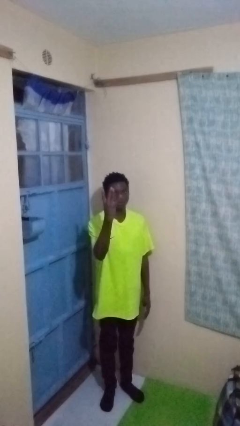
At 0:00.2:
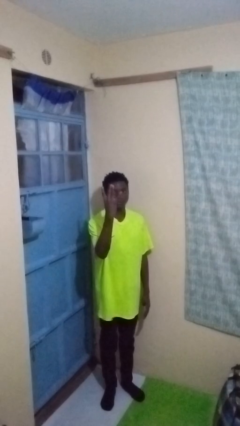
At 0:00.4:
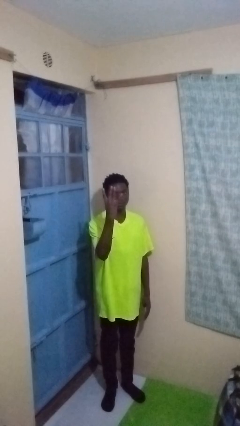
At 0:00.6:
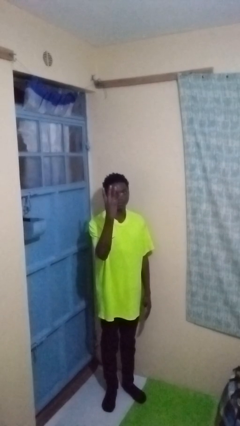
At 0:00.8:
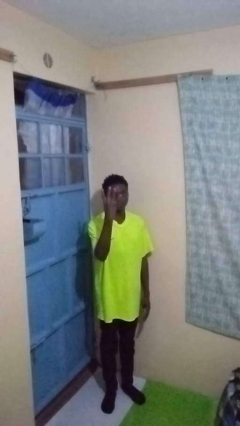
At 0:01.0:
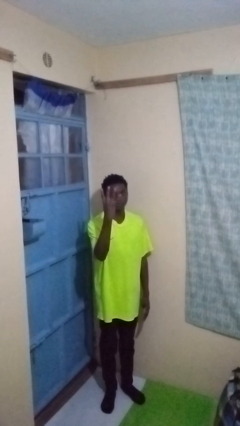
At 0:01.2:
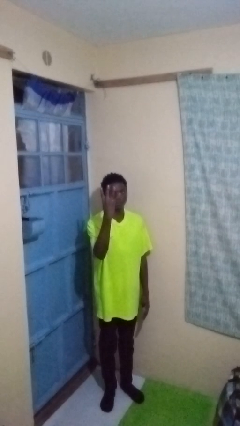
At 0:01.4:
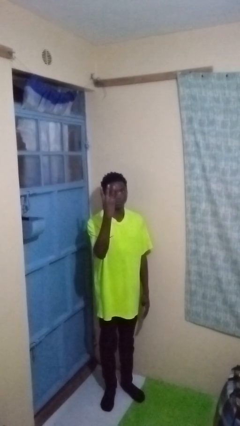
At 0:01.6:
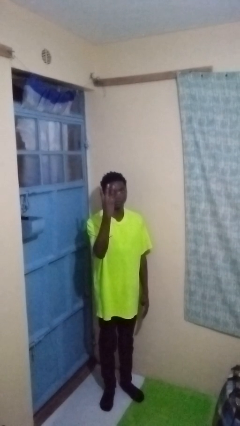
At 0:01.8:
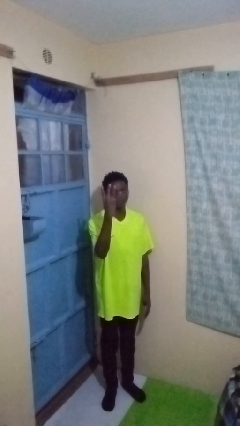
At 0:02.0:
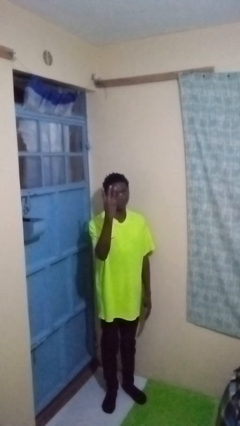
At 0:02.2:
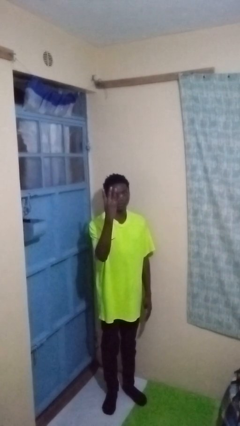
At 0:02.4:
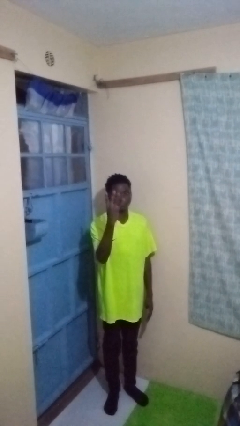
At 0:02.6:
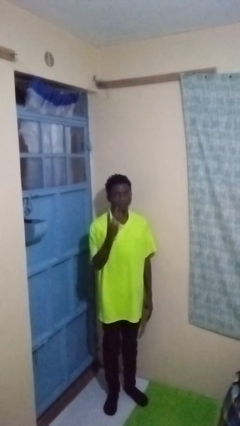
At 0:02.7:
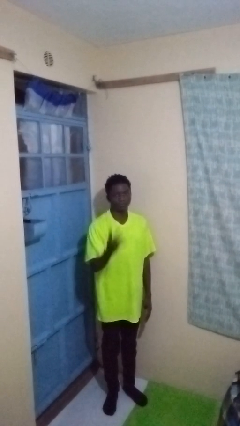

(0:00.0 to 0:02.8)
person gestures number four

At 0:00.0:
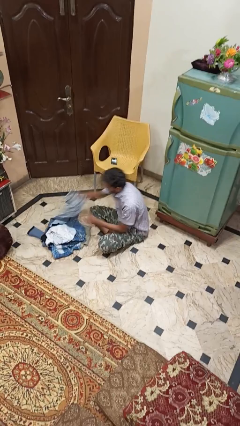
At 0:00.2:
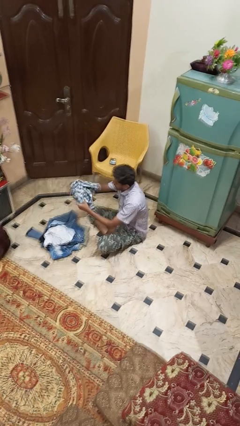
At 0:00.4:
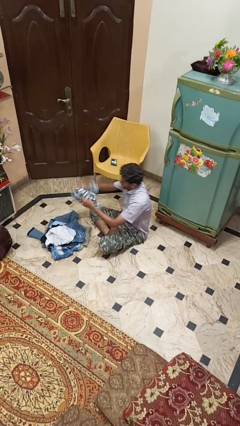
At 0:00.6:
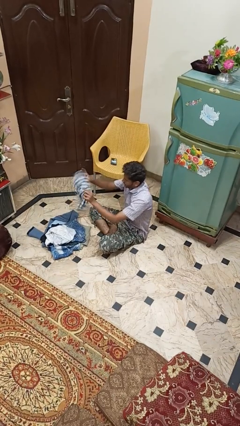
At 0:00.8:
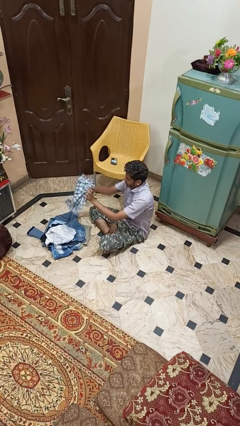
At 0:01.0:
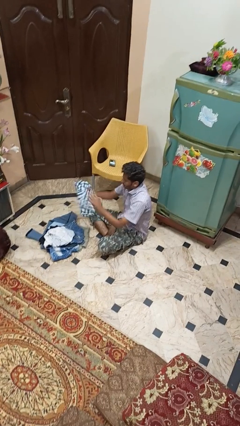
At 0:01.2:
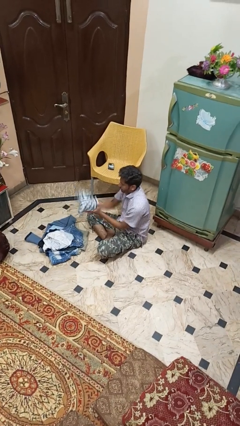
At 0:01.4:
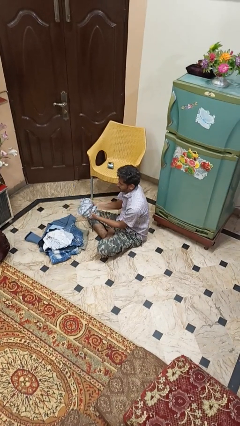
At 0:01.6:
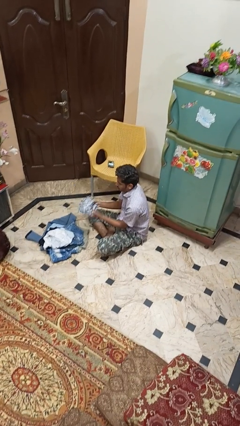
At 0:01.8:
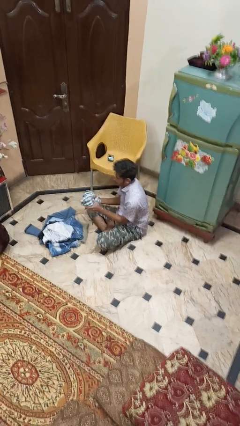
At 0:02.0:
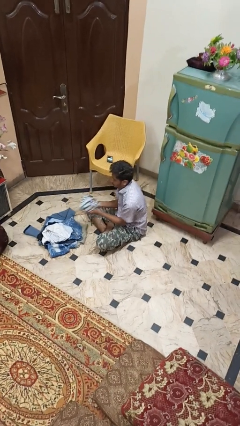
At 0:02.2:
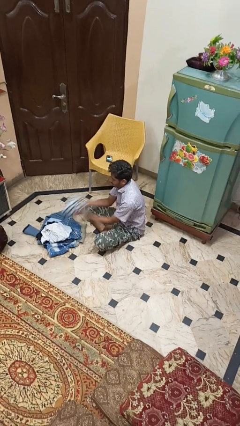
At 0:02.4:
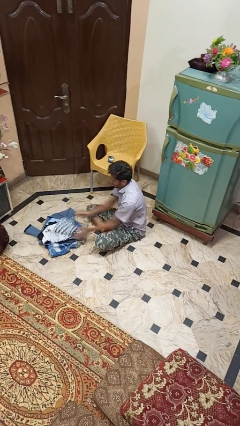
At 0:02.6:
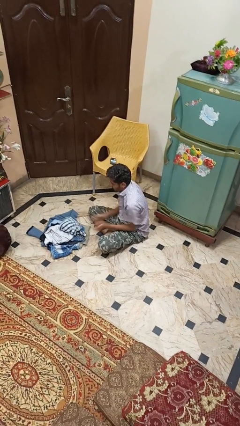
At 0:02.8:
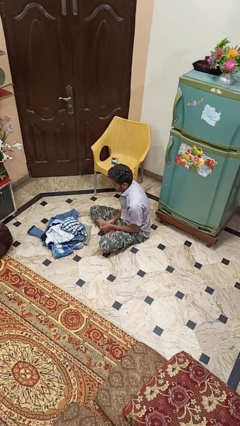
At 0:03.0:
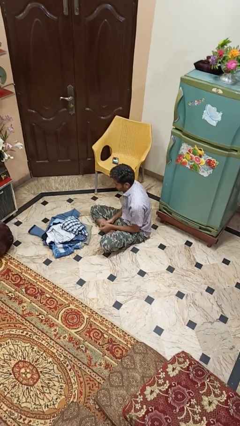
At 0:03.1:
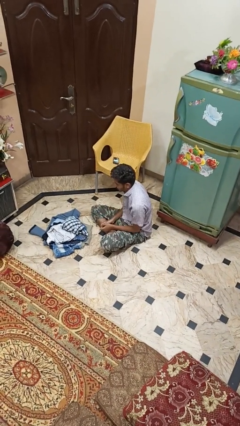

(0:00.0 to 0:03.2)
person folds shirt

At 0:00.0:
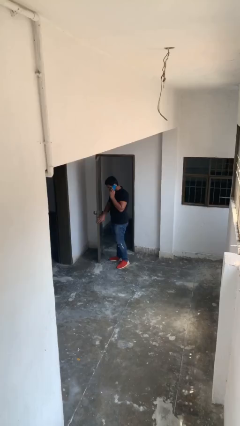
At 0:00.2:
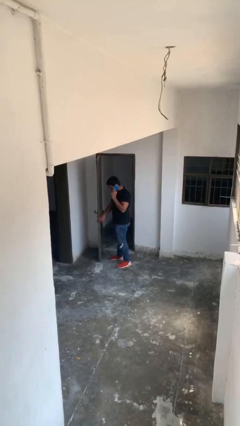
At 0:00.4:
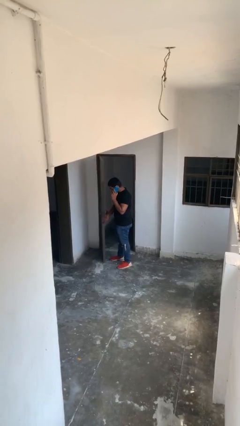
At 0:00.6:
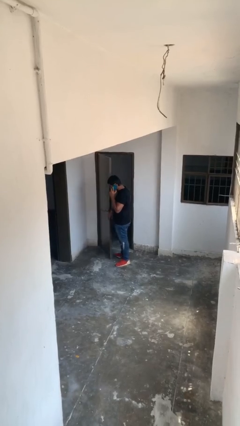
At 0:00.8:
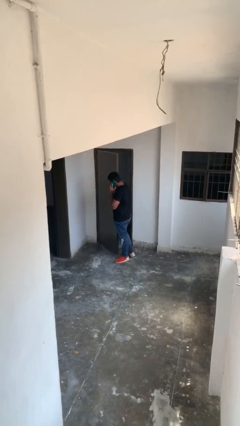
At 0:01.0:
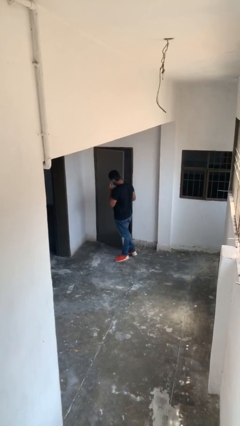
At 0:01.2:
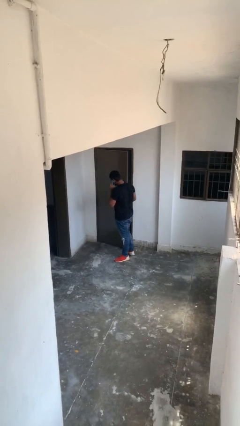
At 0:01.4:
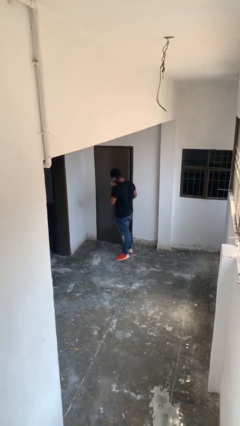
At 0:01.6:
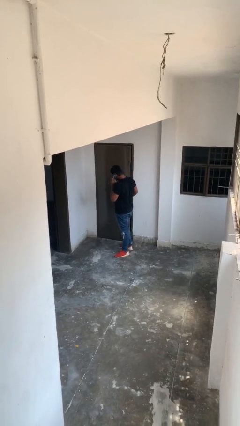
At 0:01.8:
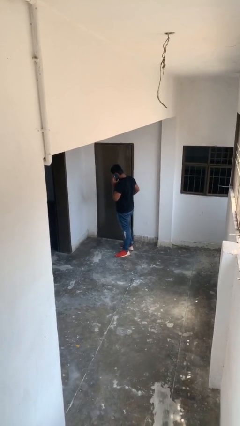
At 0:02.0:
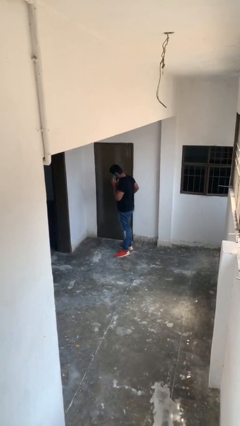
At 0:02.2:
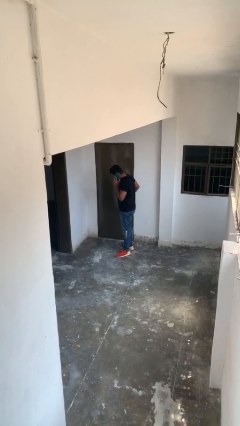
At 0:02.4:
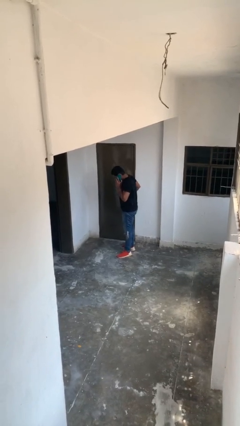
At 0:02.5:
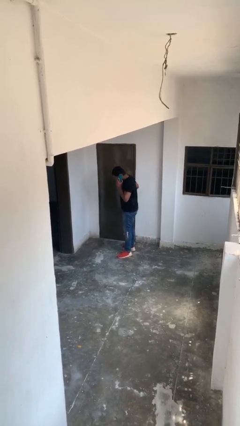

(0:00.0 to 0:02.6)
person closes facility door

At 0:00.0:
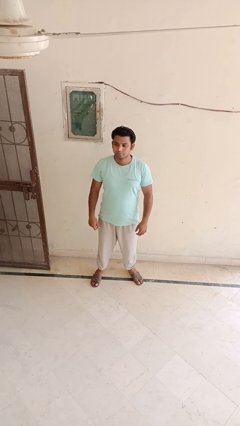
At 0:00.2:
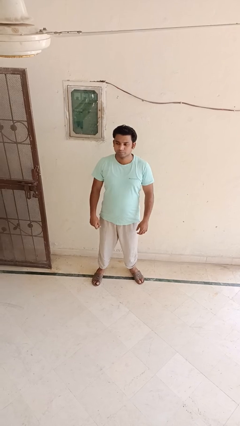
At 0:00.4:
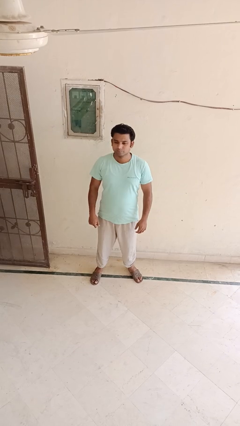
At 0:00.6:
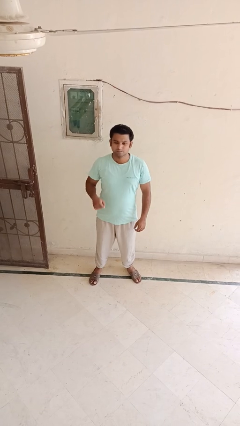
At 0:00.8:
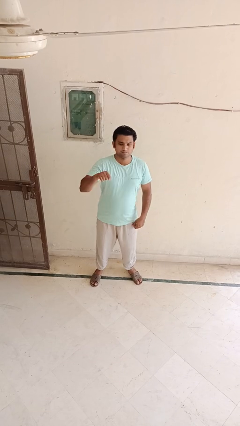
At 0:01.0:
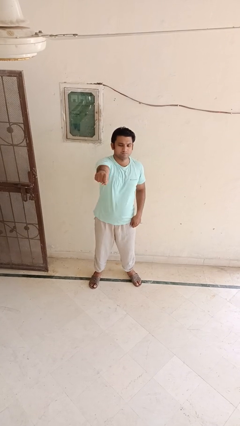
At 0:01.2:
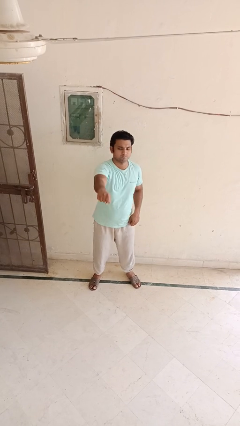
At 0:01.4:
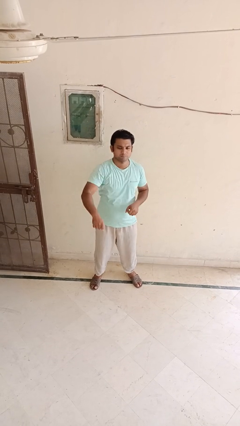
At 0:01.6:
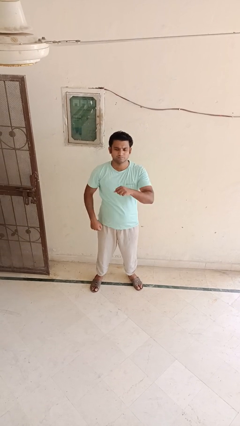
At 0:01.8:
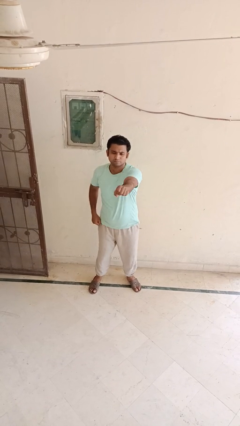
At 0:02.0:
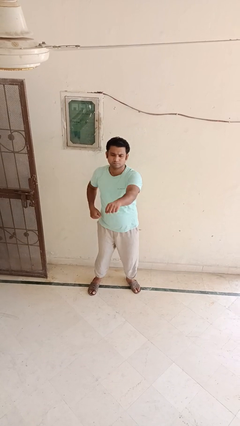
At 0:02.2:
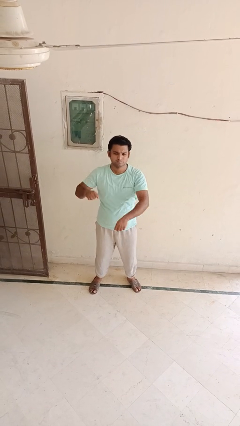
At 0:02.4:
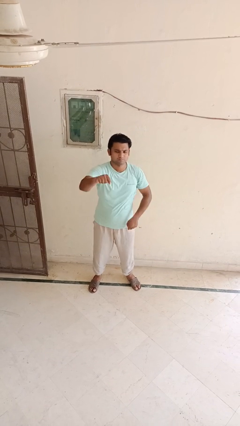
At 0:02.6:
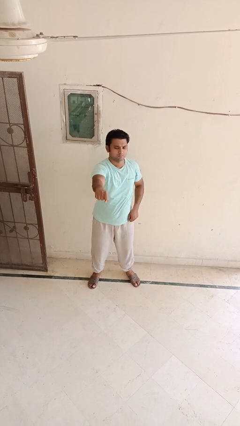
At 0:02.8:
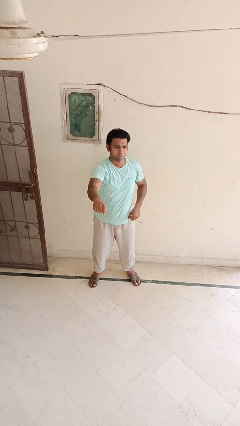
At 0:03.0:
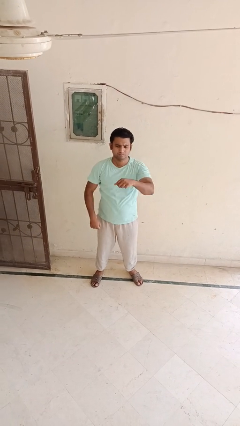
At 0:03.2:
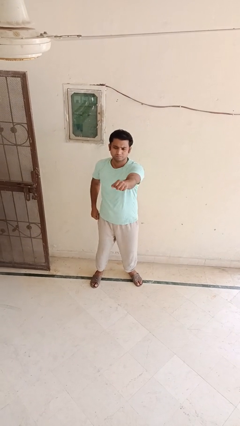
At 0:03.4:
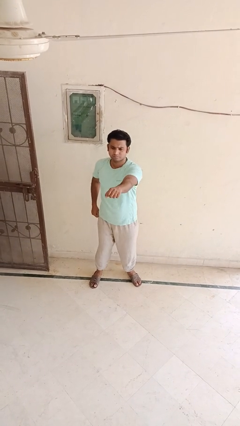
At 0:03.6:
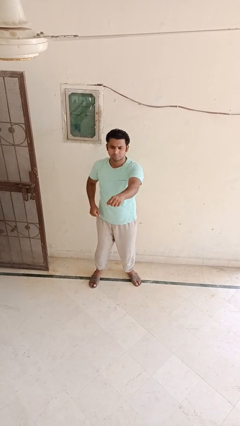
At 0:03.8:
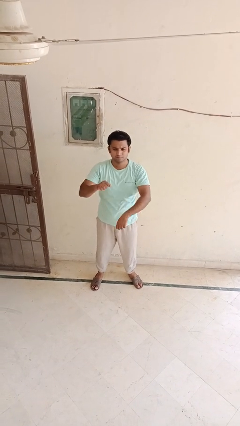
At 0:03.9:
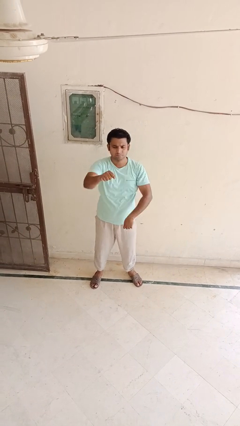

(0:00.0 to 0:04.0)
person punches

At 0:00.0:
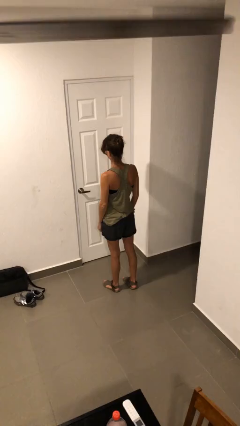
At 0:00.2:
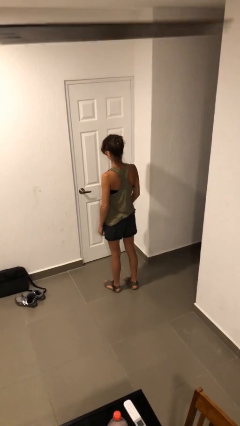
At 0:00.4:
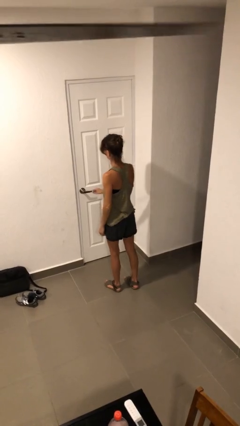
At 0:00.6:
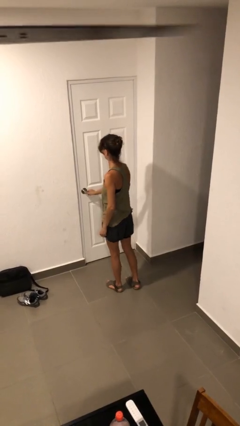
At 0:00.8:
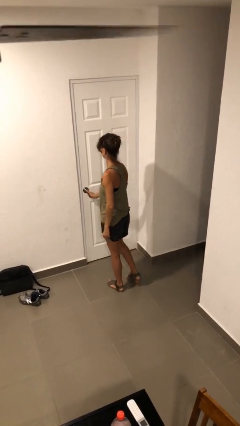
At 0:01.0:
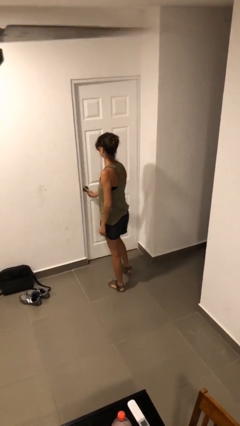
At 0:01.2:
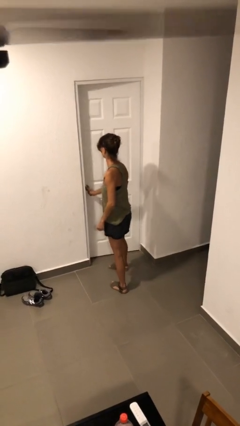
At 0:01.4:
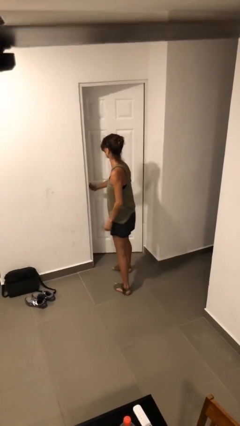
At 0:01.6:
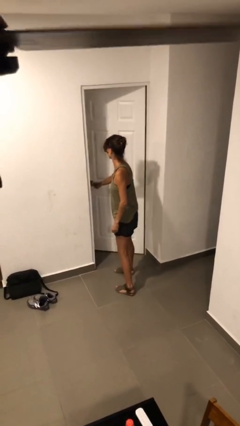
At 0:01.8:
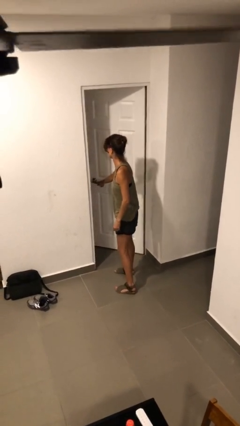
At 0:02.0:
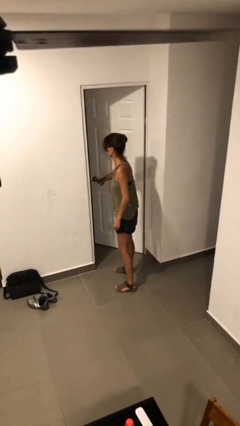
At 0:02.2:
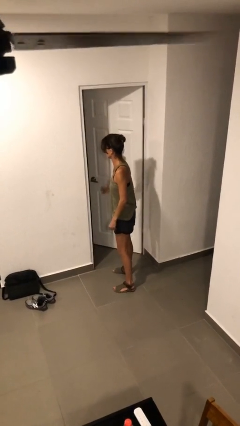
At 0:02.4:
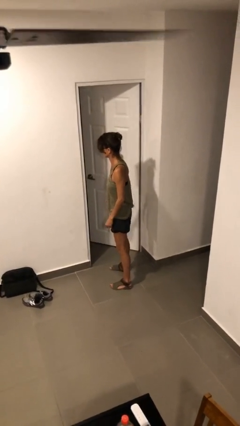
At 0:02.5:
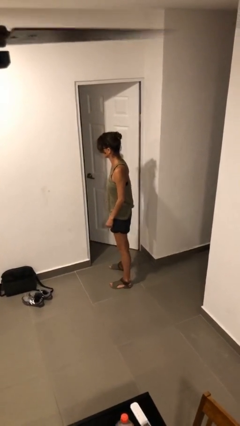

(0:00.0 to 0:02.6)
person opens facility door

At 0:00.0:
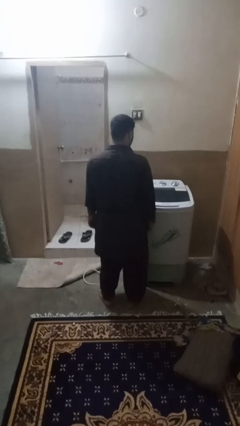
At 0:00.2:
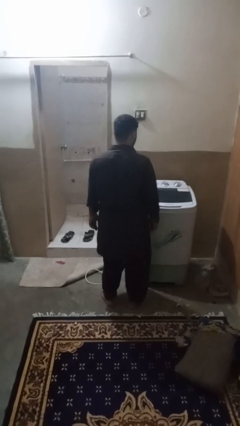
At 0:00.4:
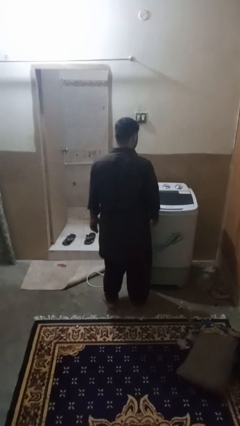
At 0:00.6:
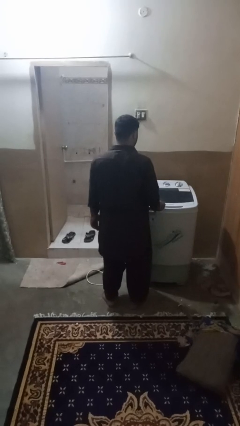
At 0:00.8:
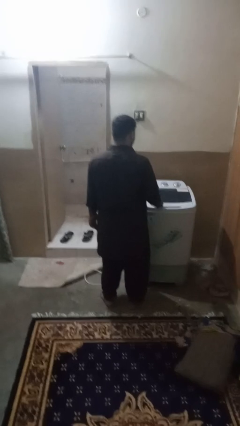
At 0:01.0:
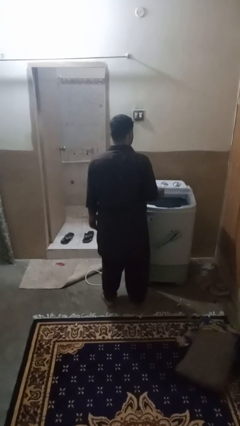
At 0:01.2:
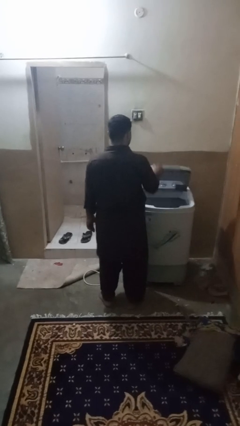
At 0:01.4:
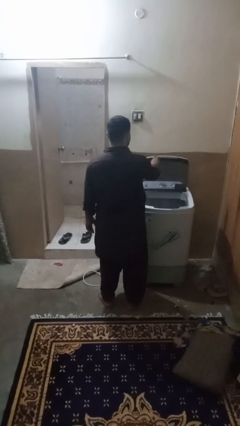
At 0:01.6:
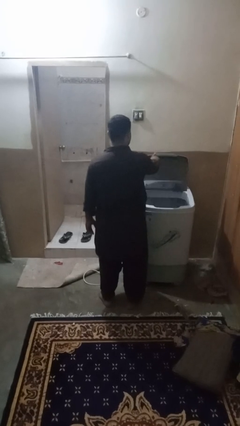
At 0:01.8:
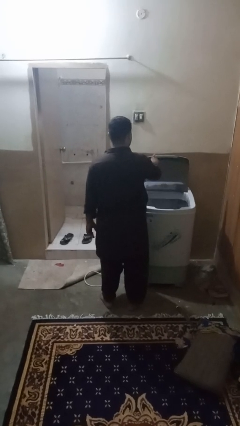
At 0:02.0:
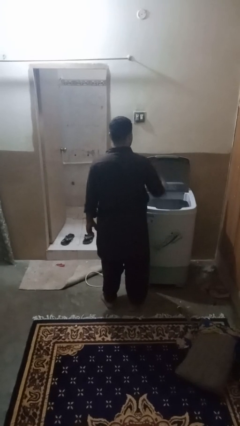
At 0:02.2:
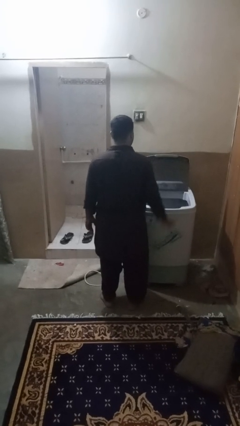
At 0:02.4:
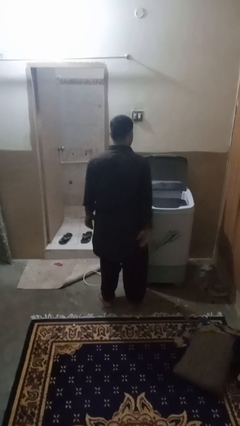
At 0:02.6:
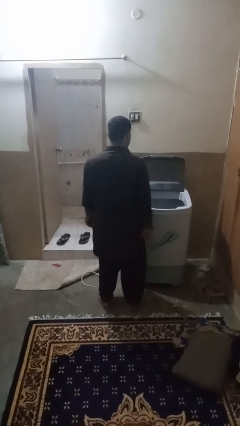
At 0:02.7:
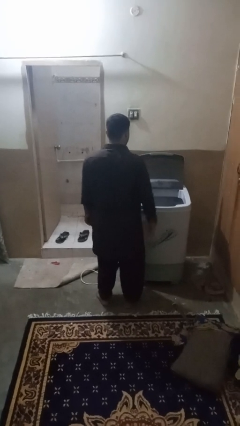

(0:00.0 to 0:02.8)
person opens clothes washer
